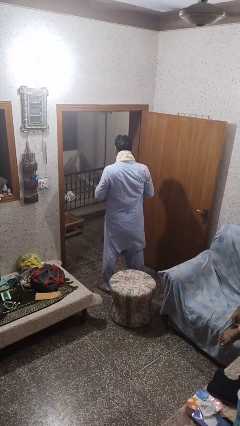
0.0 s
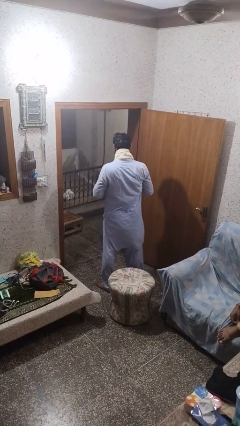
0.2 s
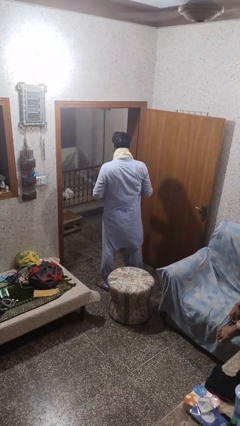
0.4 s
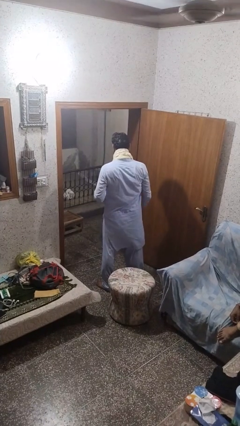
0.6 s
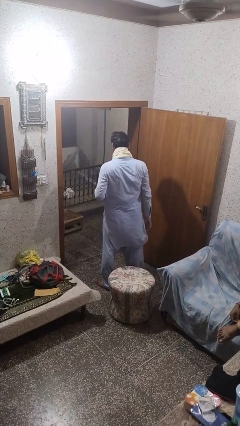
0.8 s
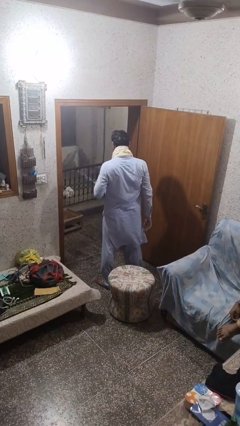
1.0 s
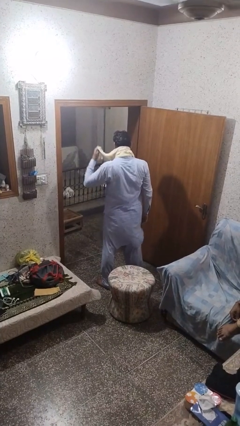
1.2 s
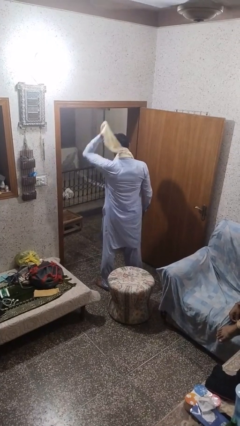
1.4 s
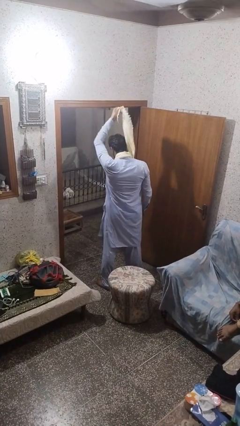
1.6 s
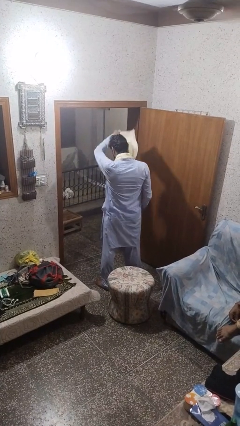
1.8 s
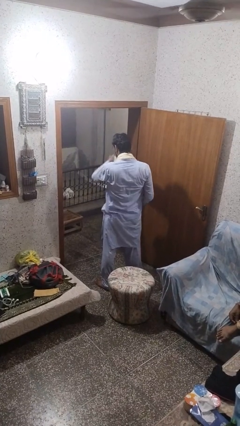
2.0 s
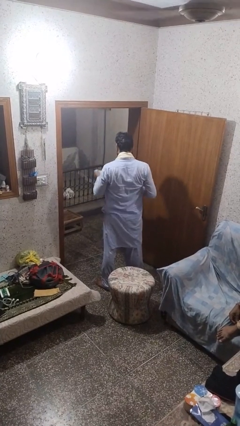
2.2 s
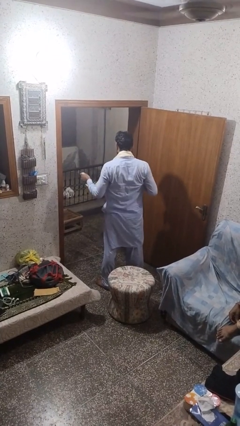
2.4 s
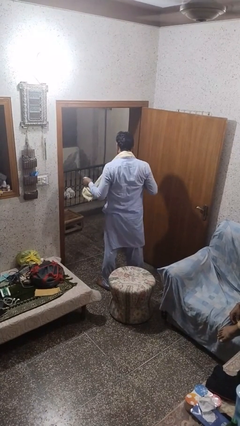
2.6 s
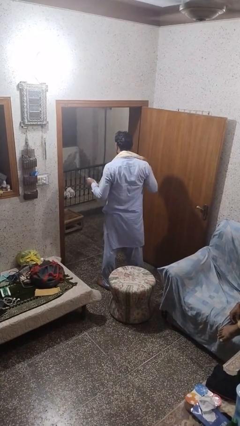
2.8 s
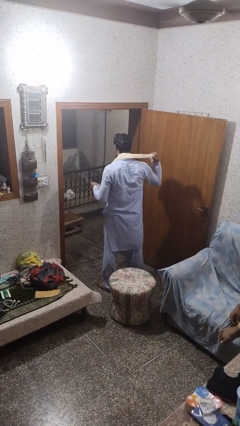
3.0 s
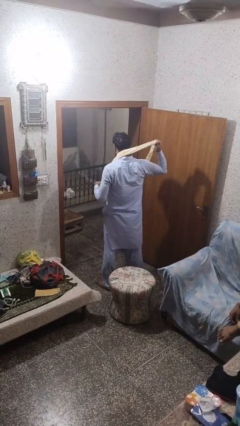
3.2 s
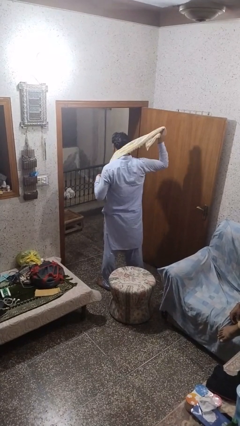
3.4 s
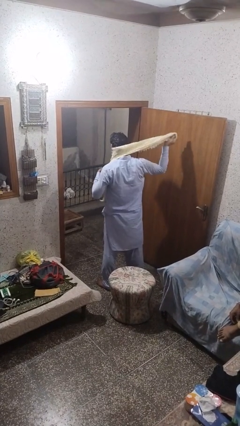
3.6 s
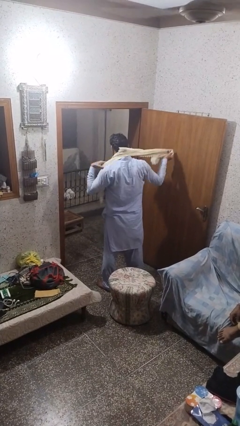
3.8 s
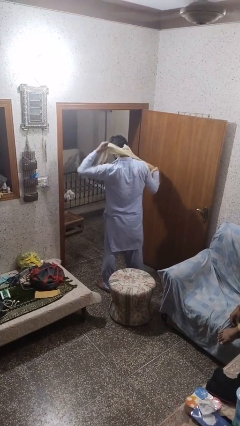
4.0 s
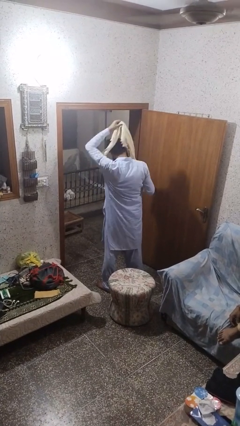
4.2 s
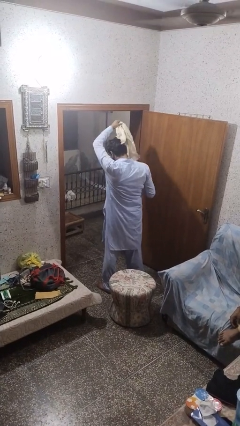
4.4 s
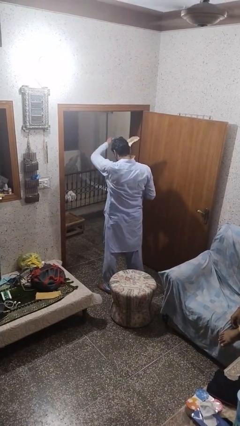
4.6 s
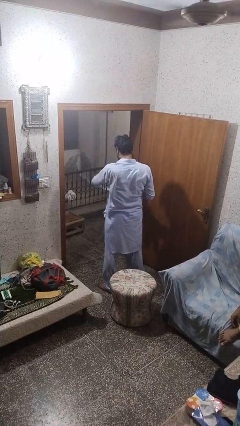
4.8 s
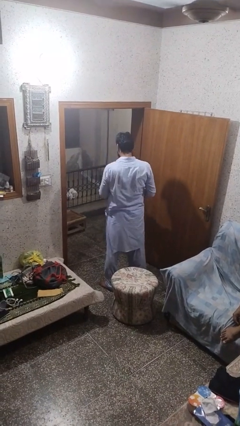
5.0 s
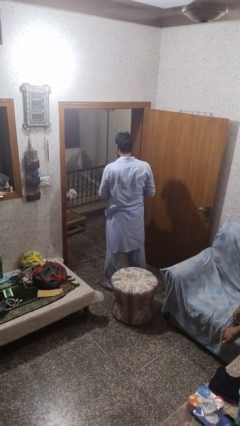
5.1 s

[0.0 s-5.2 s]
person takes off scarf

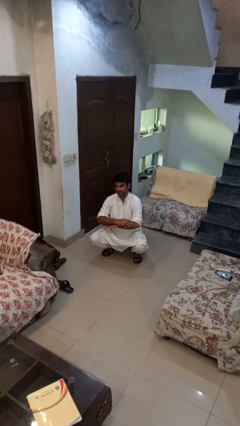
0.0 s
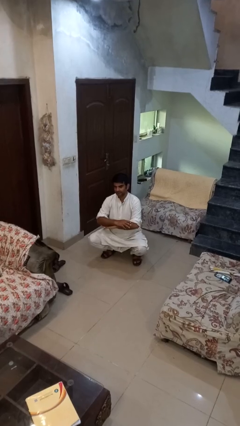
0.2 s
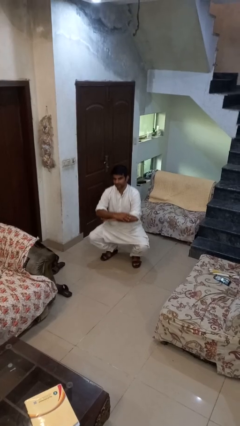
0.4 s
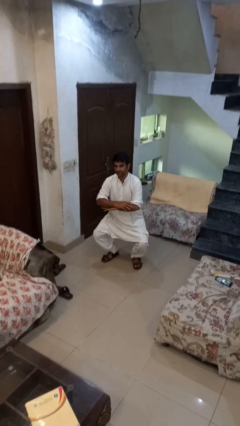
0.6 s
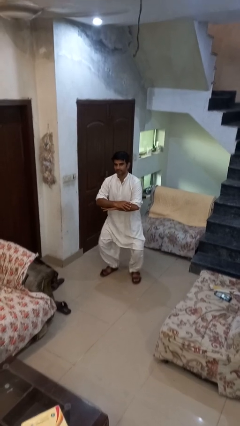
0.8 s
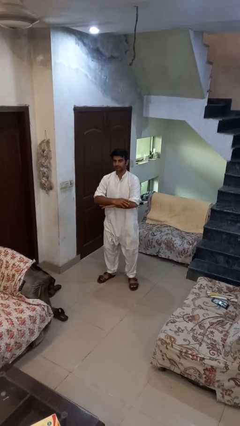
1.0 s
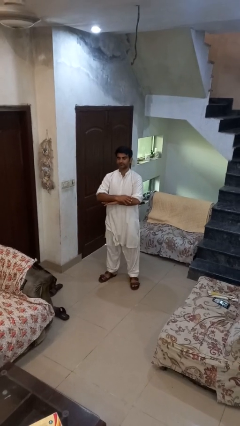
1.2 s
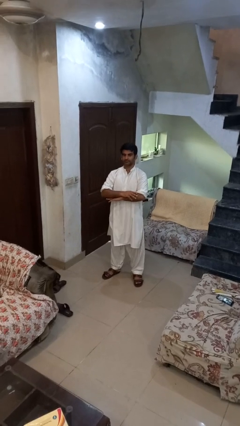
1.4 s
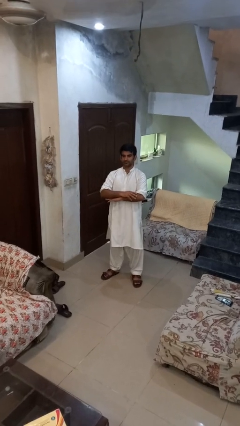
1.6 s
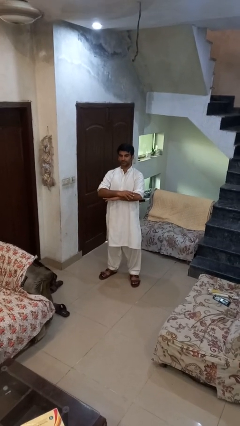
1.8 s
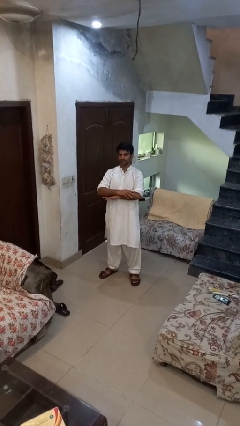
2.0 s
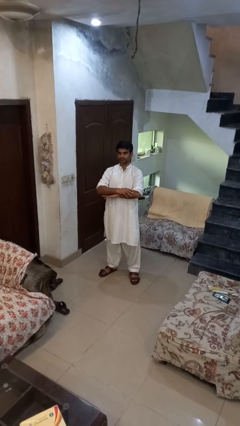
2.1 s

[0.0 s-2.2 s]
person stands up

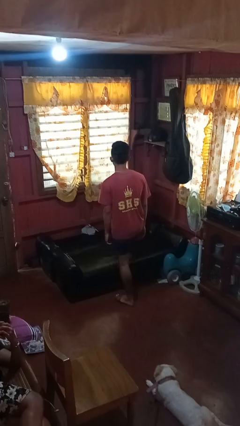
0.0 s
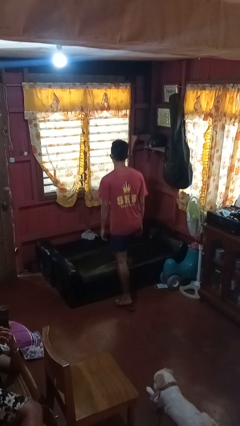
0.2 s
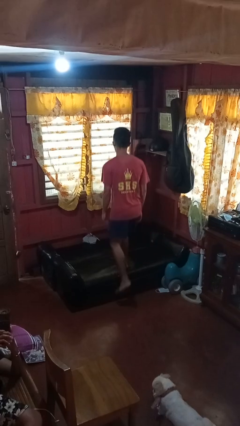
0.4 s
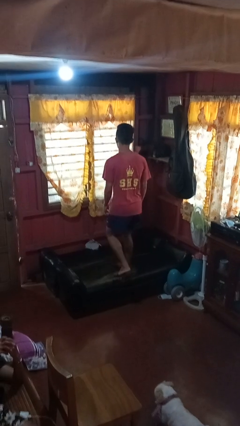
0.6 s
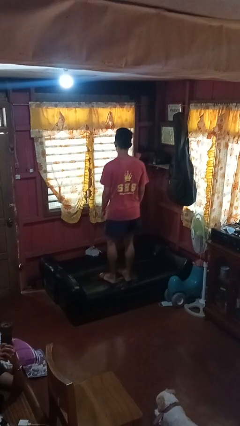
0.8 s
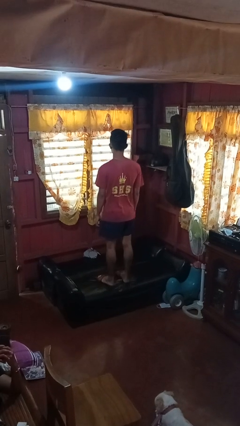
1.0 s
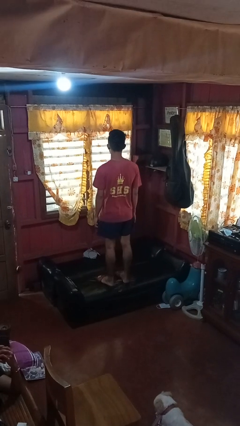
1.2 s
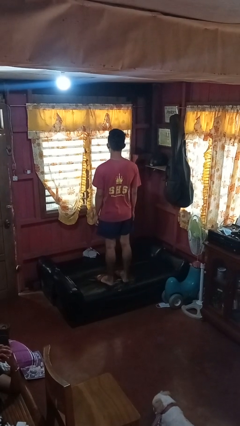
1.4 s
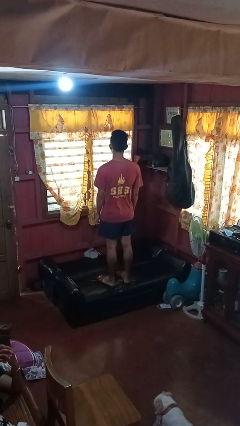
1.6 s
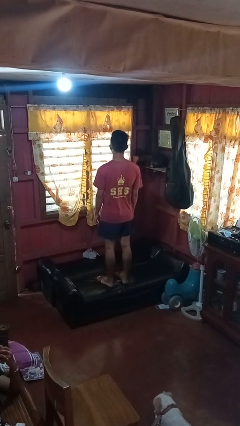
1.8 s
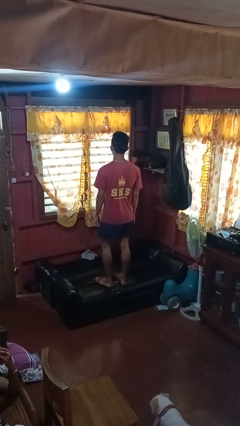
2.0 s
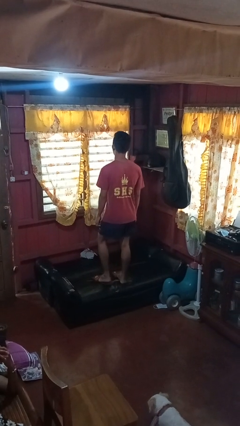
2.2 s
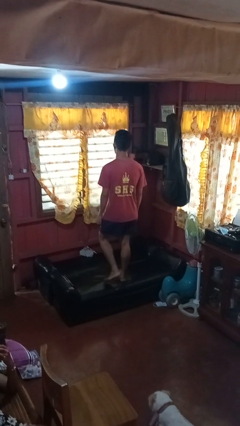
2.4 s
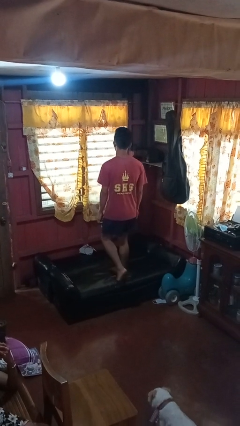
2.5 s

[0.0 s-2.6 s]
person climbs on couch

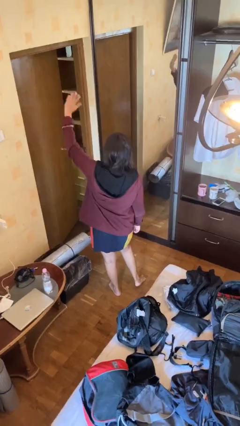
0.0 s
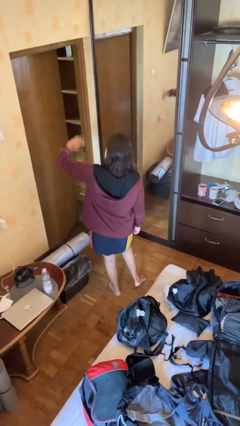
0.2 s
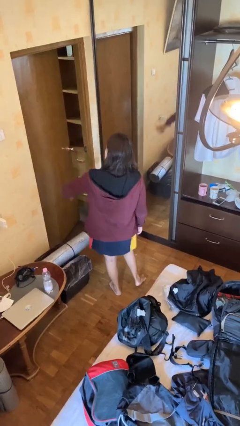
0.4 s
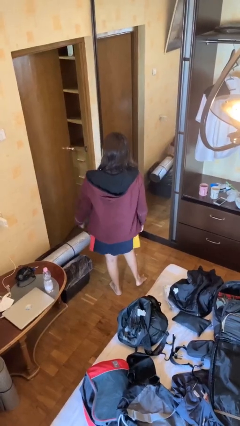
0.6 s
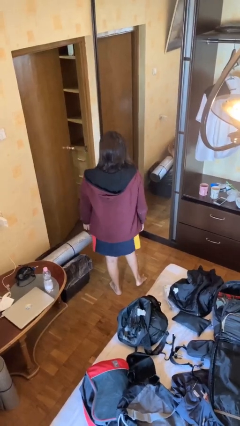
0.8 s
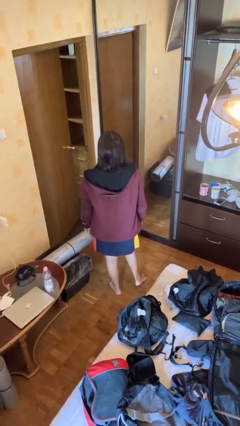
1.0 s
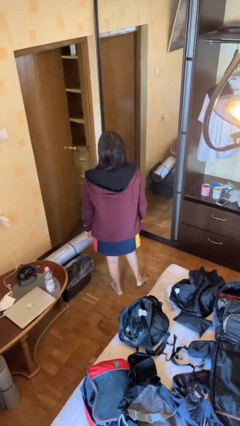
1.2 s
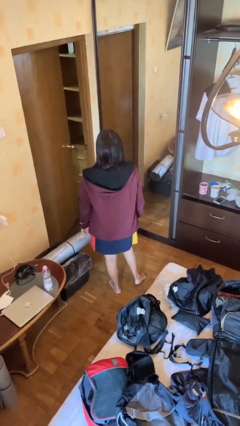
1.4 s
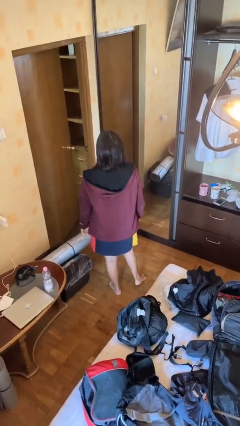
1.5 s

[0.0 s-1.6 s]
person gestures swipe down

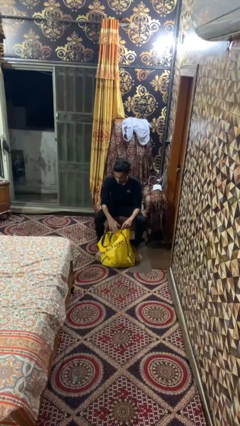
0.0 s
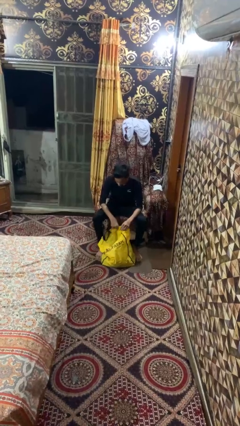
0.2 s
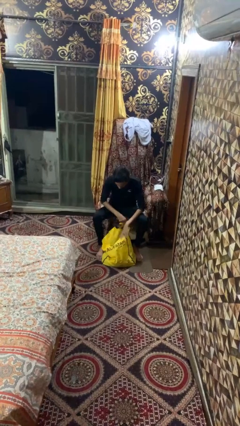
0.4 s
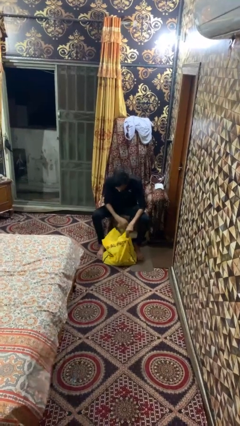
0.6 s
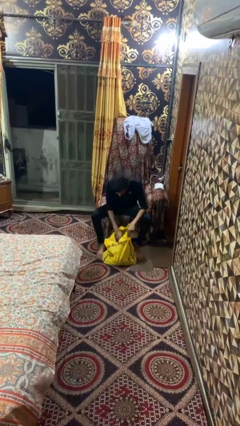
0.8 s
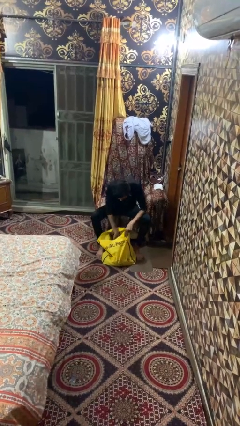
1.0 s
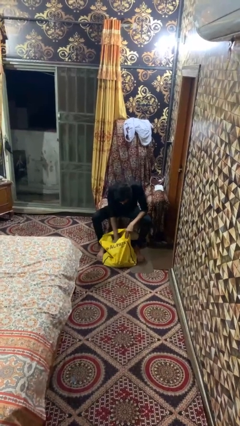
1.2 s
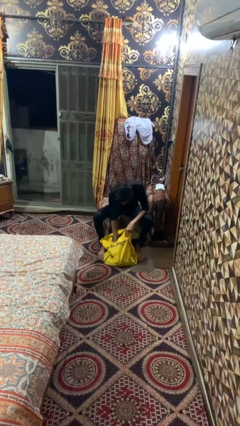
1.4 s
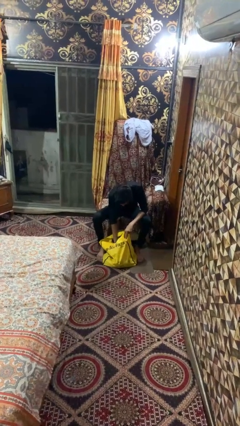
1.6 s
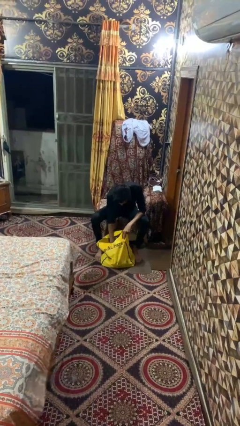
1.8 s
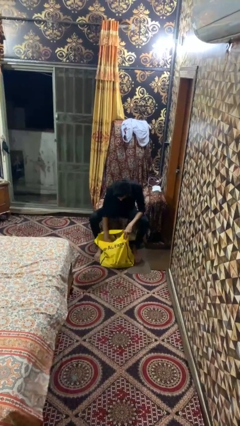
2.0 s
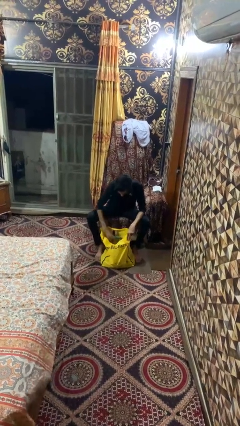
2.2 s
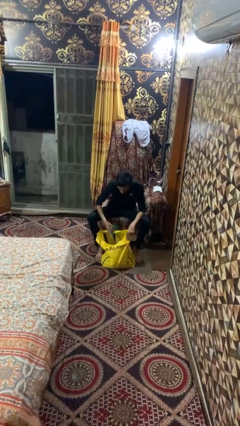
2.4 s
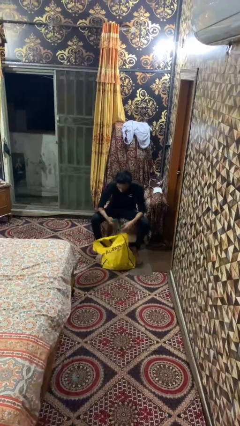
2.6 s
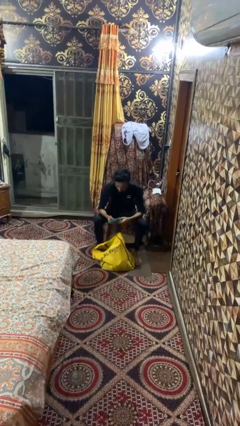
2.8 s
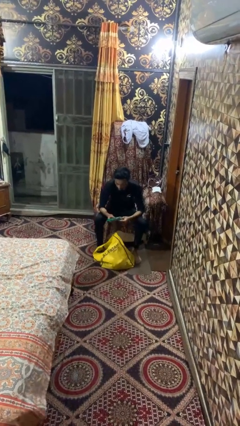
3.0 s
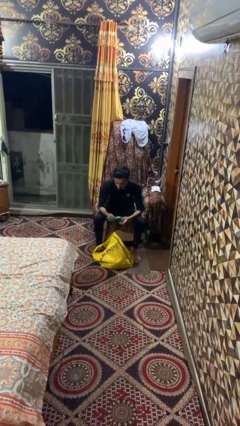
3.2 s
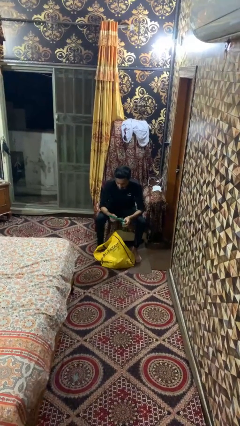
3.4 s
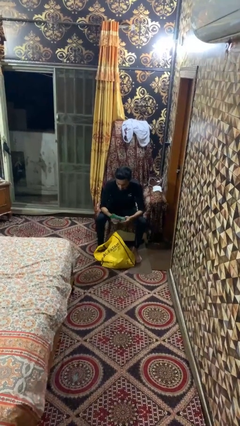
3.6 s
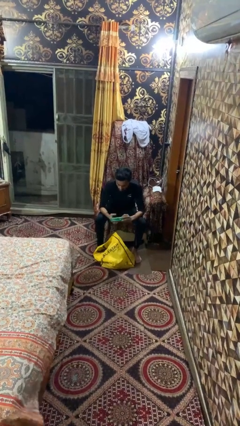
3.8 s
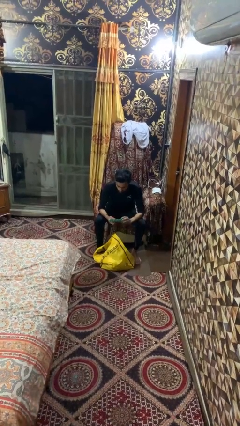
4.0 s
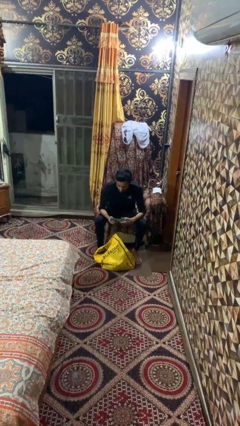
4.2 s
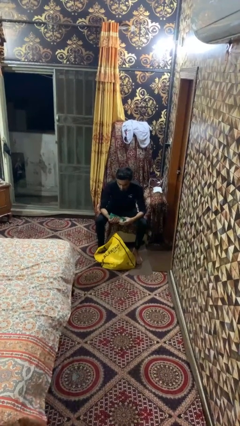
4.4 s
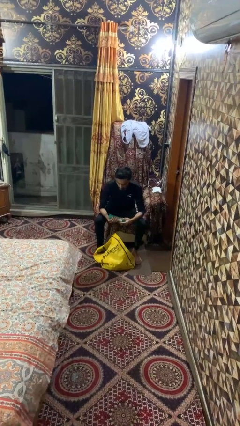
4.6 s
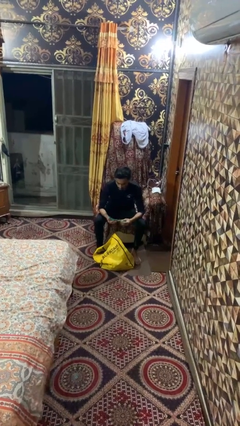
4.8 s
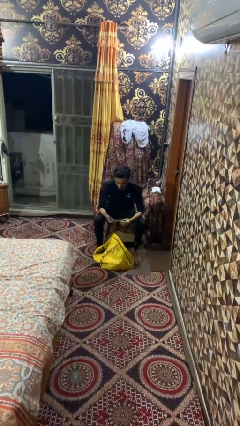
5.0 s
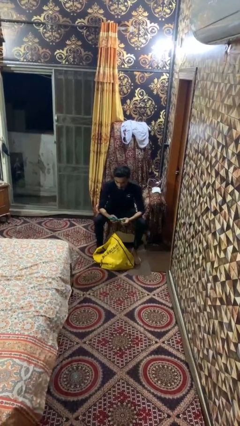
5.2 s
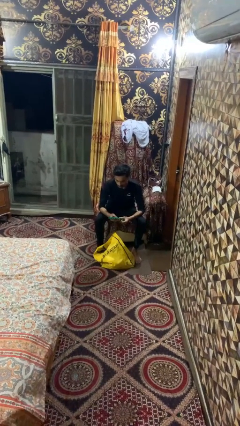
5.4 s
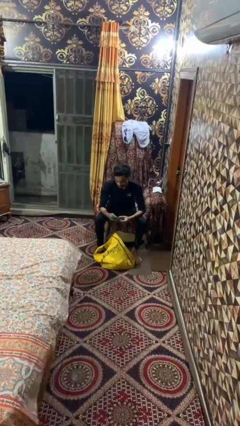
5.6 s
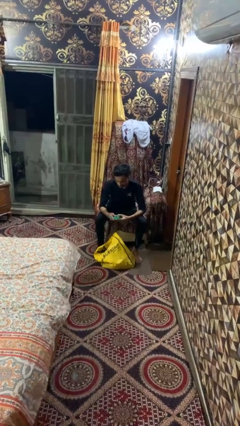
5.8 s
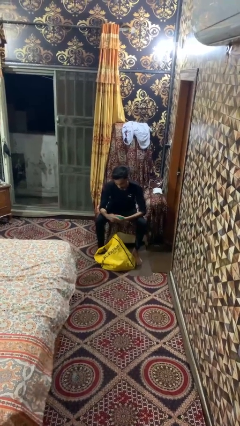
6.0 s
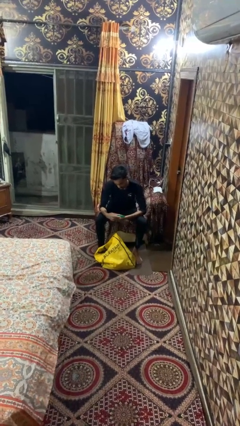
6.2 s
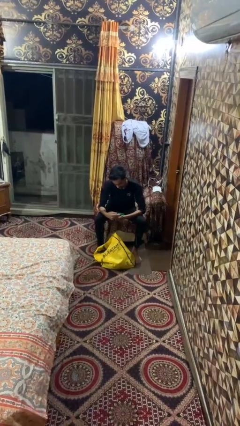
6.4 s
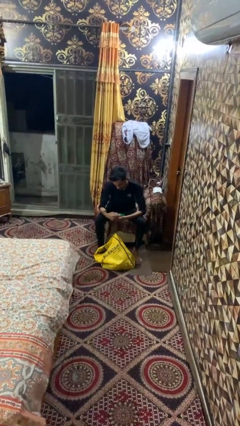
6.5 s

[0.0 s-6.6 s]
person takes object from bag

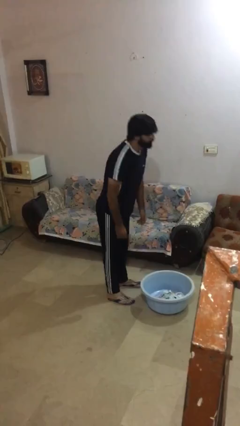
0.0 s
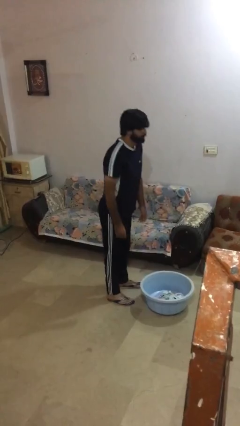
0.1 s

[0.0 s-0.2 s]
person picks up object from floor
